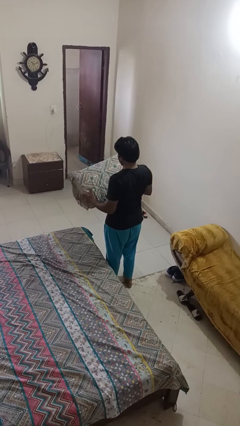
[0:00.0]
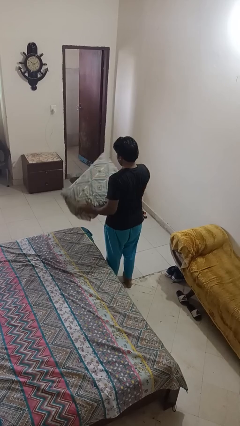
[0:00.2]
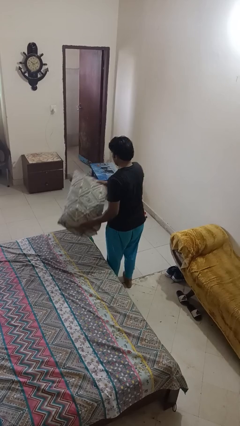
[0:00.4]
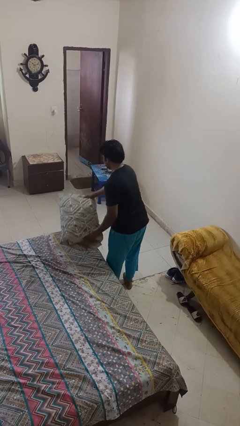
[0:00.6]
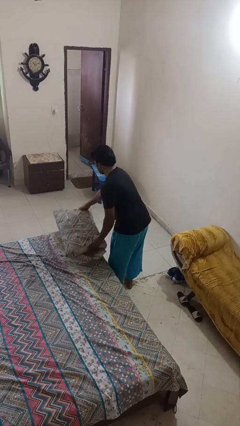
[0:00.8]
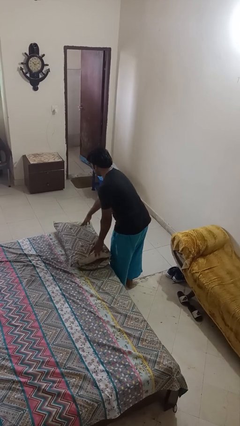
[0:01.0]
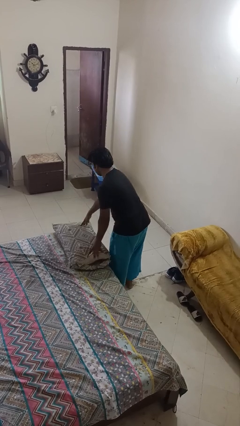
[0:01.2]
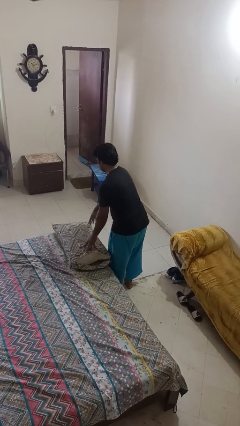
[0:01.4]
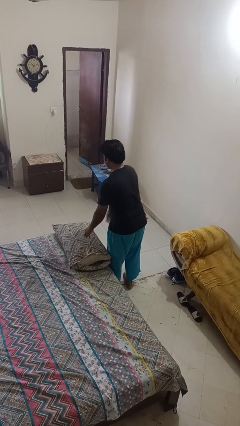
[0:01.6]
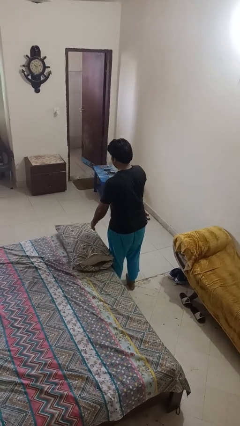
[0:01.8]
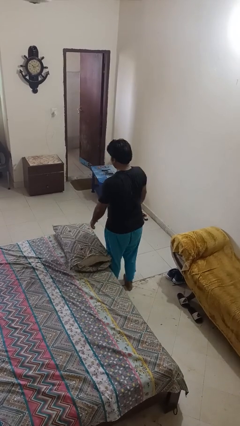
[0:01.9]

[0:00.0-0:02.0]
person puts down object on bed

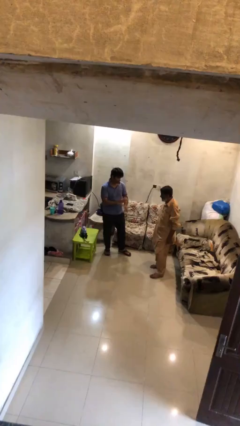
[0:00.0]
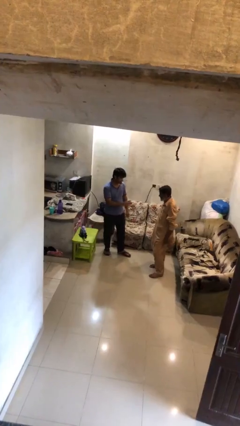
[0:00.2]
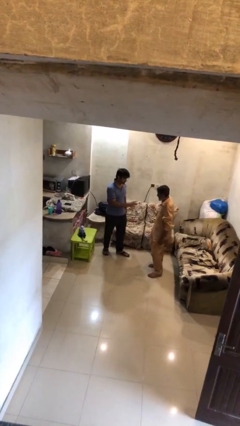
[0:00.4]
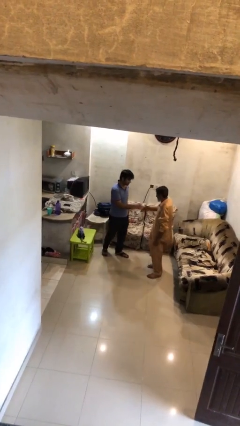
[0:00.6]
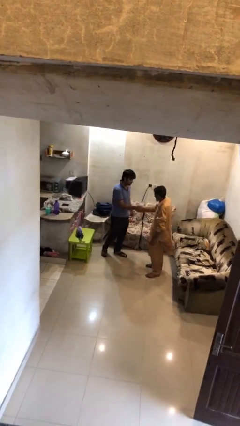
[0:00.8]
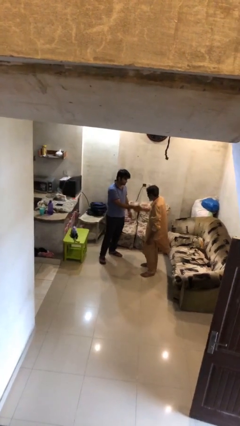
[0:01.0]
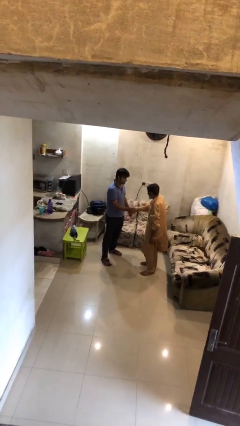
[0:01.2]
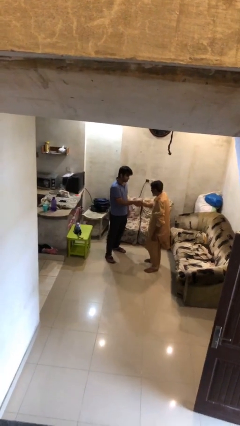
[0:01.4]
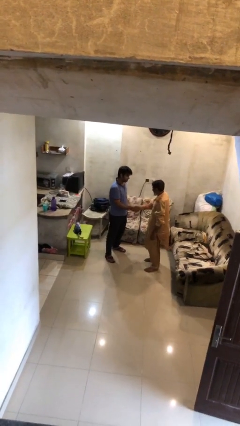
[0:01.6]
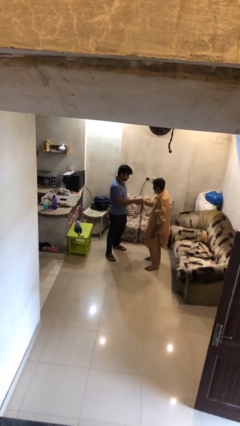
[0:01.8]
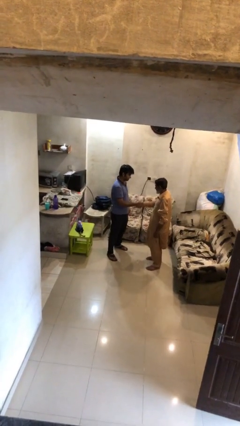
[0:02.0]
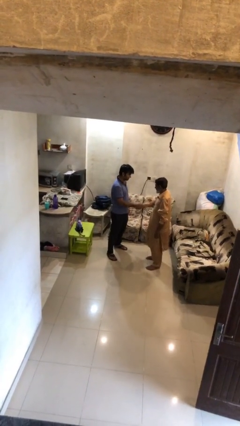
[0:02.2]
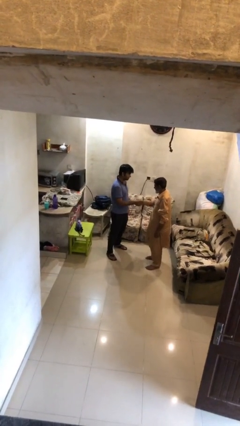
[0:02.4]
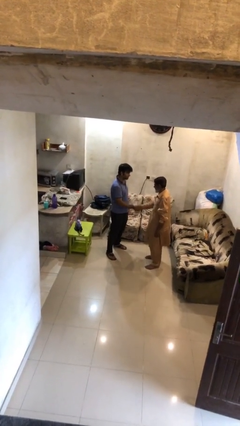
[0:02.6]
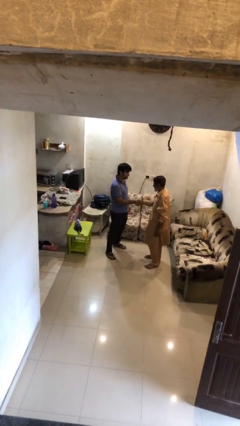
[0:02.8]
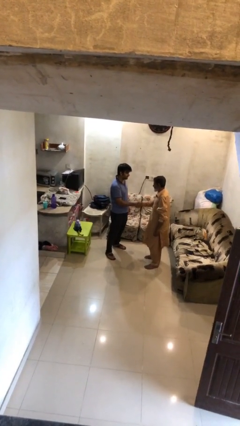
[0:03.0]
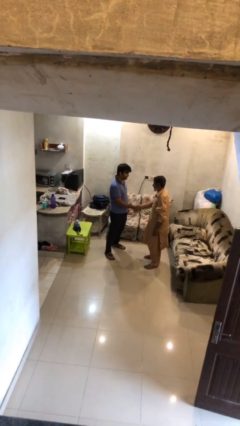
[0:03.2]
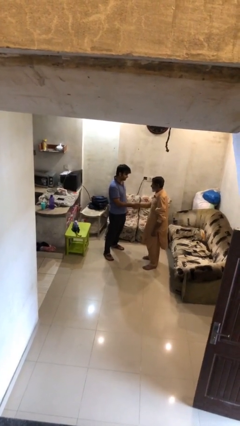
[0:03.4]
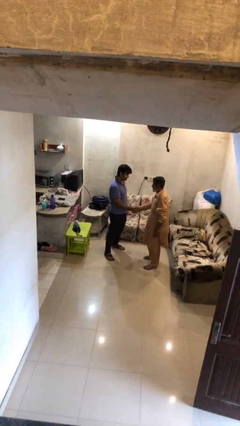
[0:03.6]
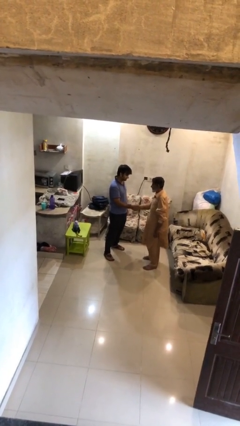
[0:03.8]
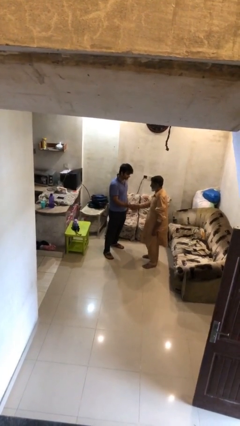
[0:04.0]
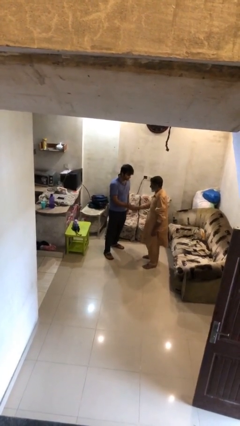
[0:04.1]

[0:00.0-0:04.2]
person shakes hand

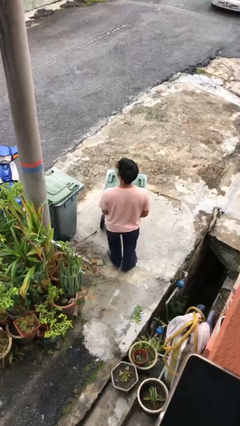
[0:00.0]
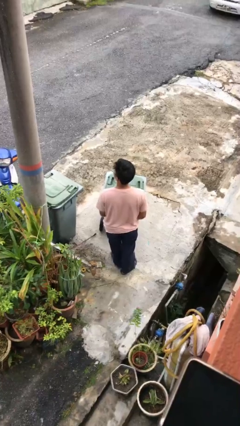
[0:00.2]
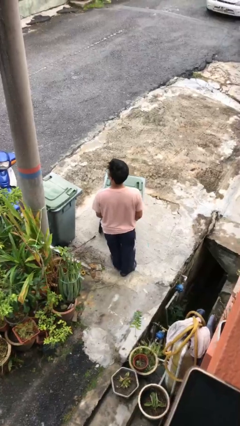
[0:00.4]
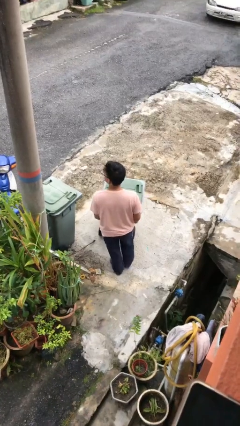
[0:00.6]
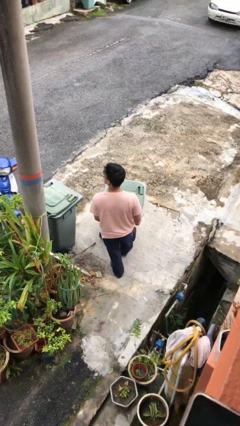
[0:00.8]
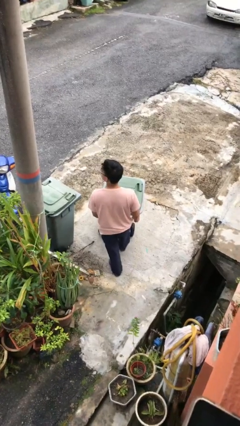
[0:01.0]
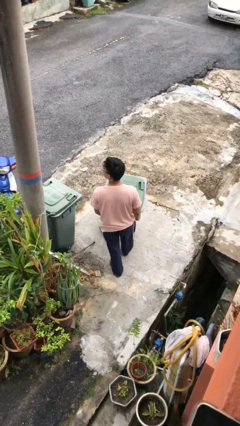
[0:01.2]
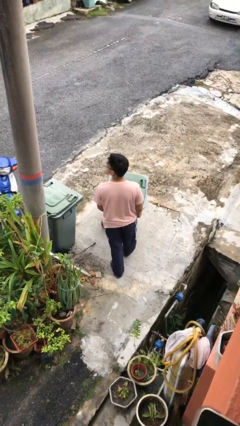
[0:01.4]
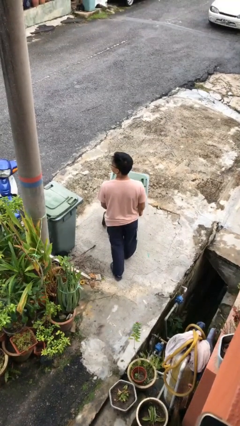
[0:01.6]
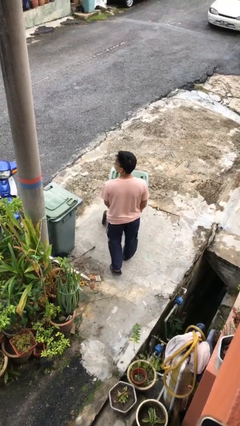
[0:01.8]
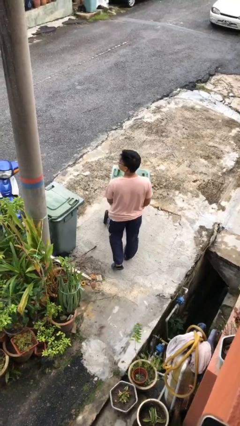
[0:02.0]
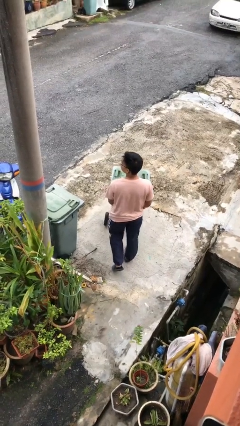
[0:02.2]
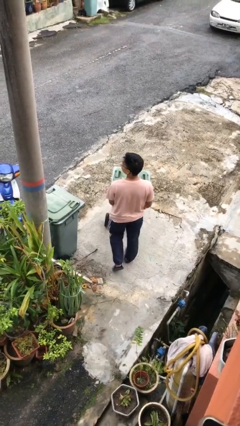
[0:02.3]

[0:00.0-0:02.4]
person pushes wheeled trashcan

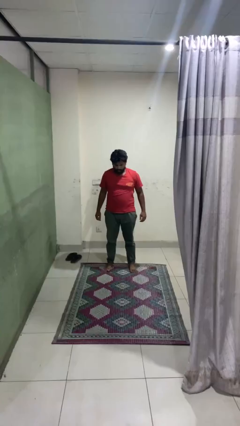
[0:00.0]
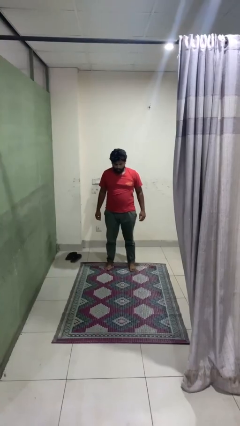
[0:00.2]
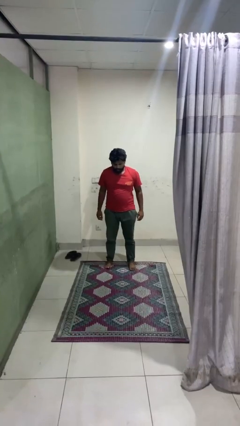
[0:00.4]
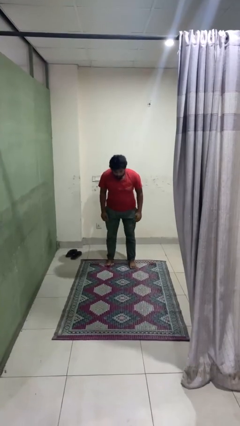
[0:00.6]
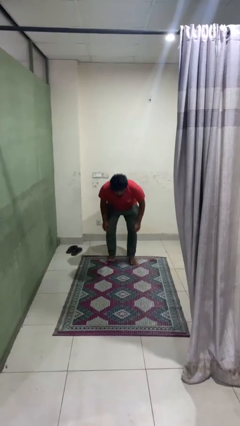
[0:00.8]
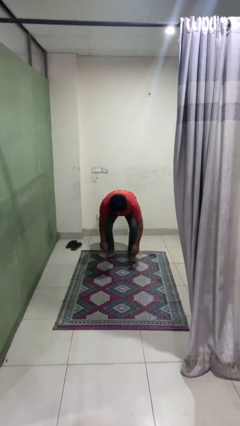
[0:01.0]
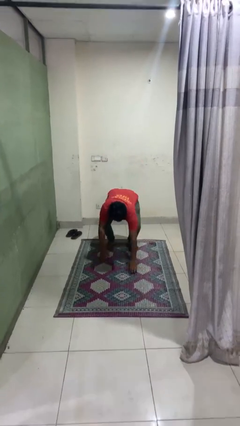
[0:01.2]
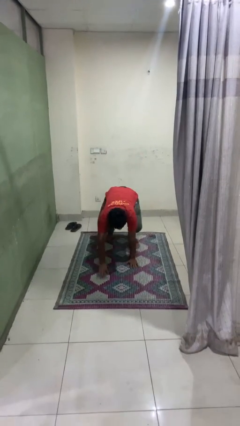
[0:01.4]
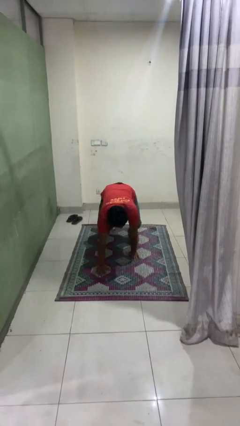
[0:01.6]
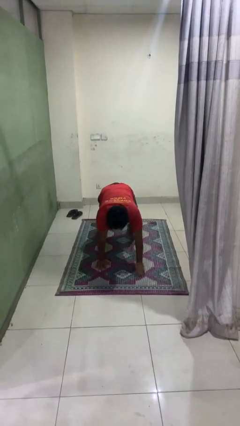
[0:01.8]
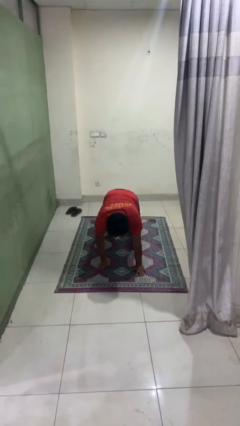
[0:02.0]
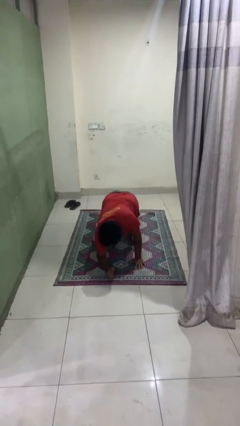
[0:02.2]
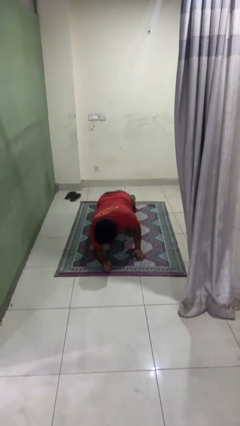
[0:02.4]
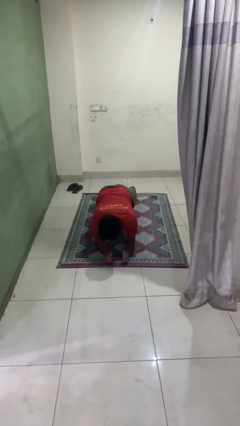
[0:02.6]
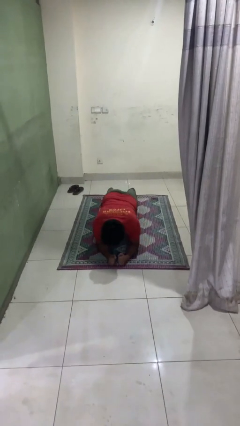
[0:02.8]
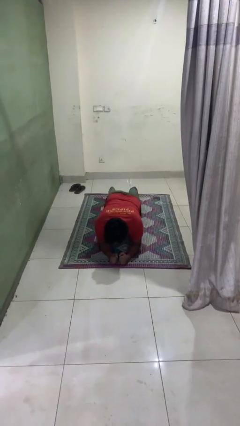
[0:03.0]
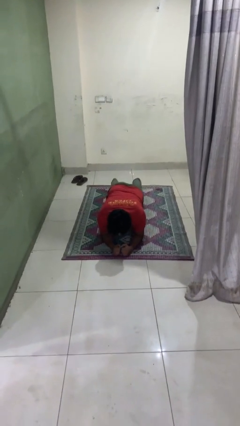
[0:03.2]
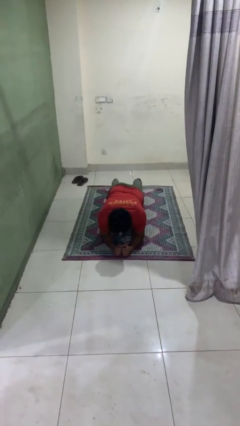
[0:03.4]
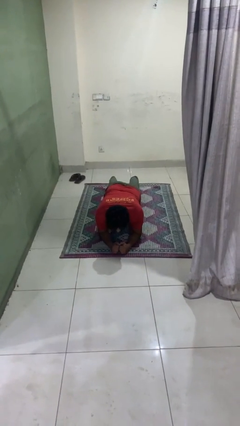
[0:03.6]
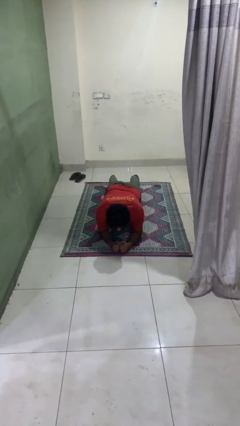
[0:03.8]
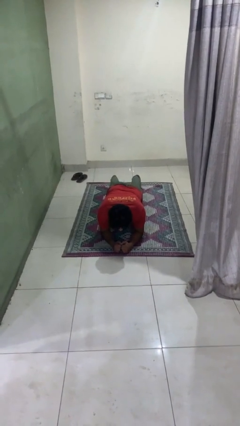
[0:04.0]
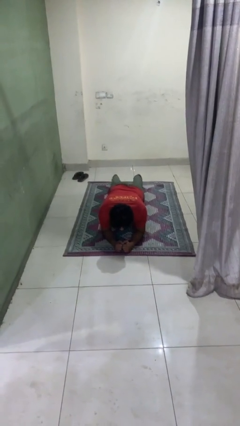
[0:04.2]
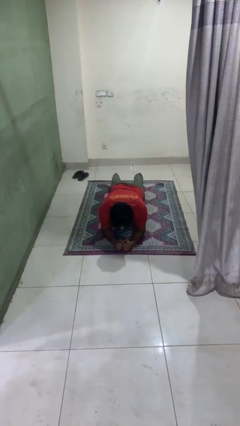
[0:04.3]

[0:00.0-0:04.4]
person exercises with plank

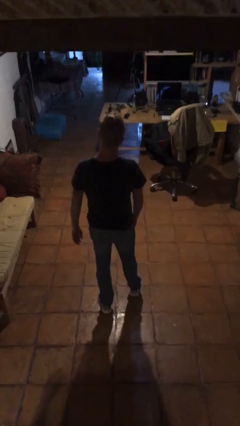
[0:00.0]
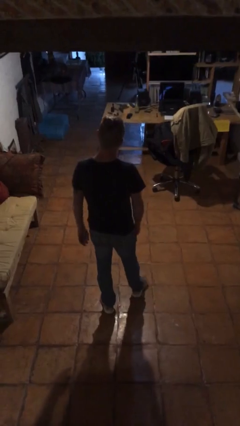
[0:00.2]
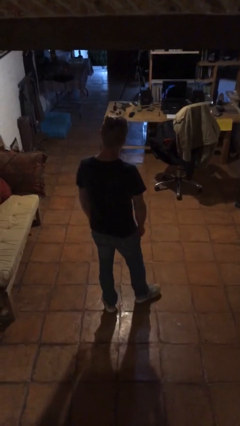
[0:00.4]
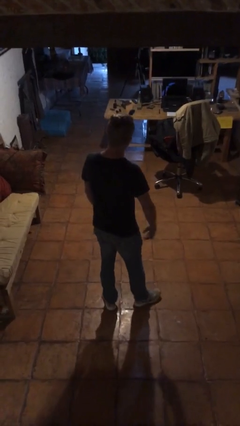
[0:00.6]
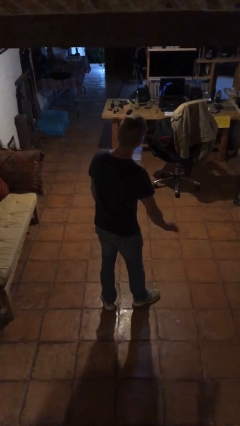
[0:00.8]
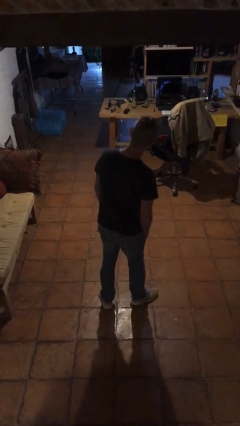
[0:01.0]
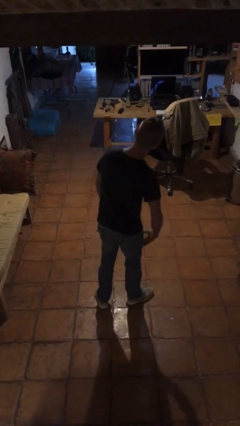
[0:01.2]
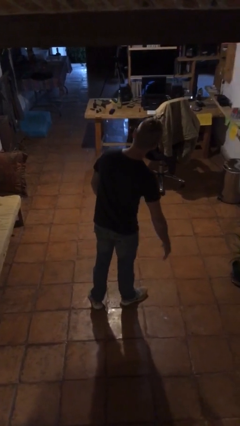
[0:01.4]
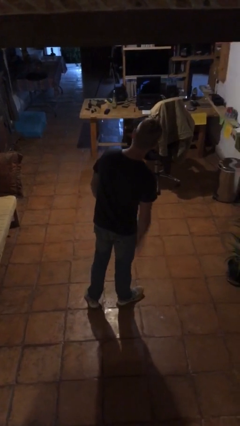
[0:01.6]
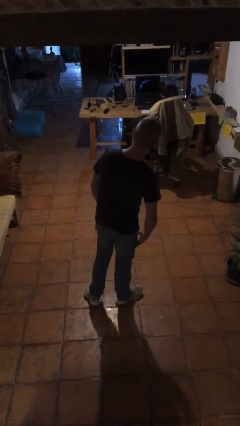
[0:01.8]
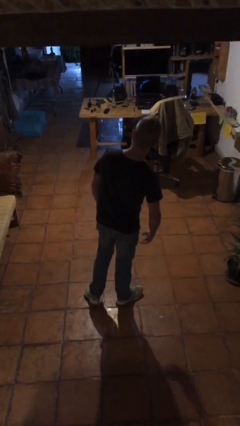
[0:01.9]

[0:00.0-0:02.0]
person slaps hands on thighs

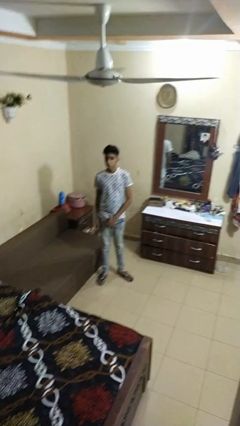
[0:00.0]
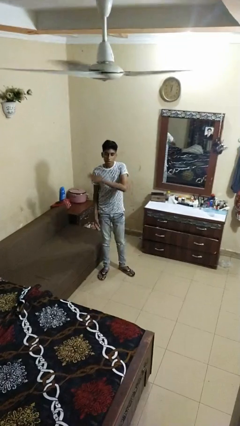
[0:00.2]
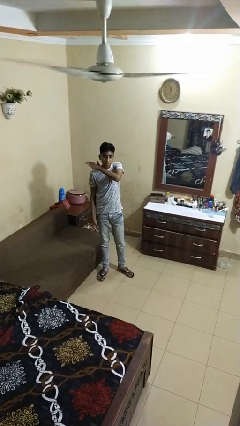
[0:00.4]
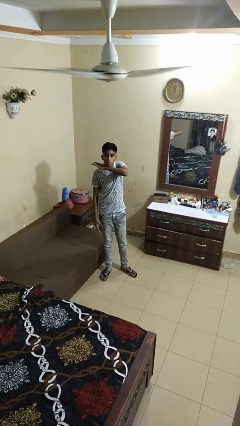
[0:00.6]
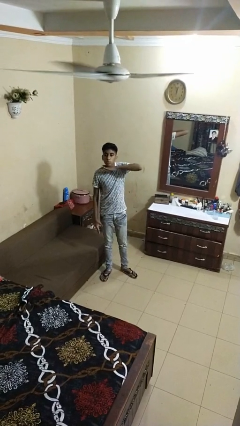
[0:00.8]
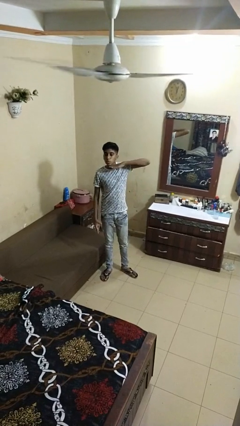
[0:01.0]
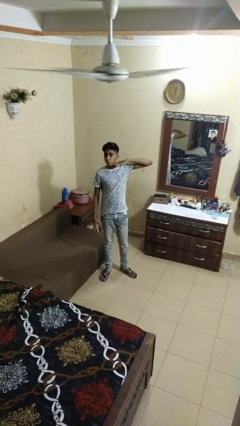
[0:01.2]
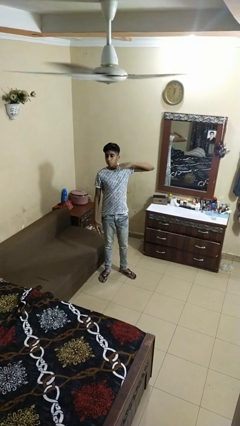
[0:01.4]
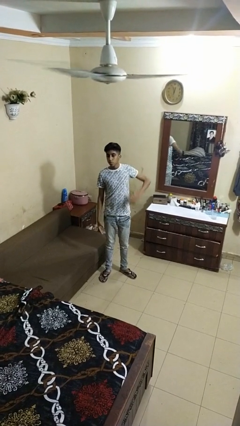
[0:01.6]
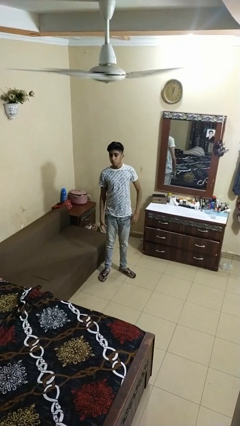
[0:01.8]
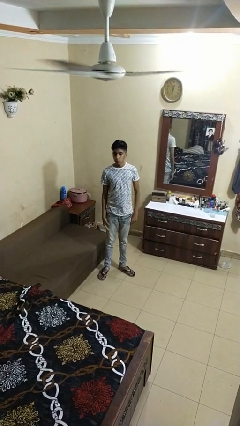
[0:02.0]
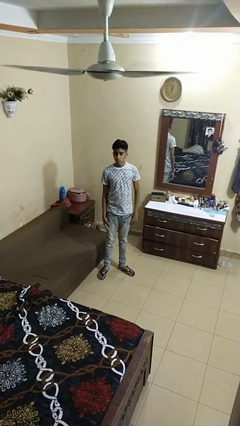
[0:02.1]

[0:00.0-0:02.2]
person gestures cut

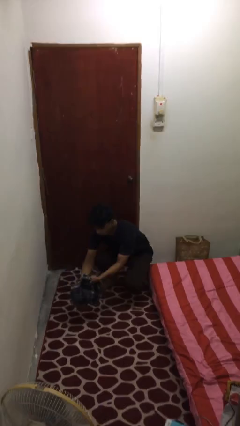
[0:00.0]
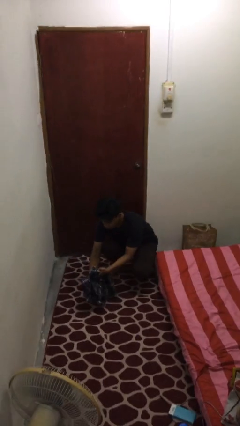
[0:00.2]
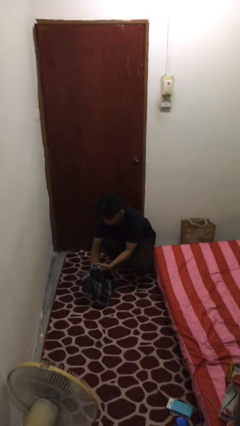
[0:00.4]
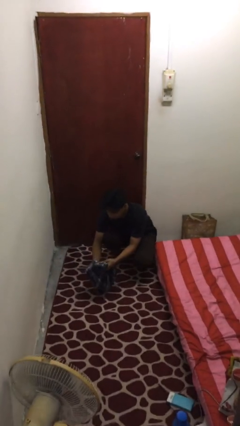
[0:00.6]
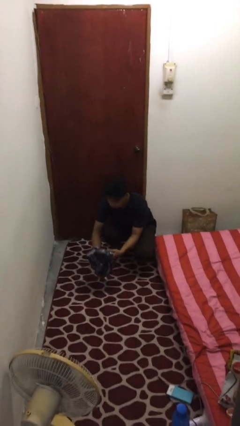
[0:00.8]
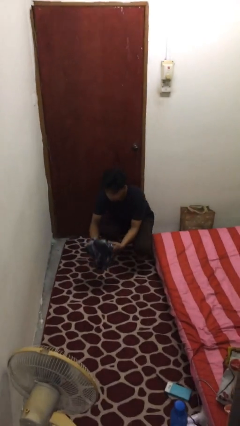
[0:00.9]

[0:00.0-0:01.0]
person catches dropped object
